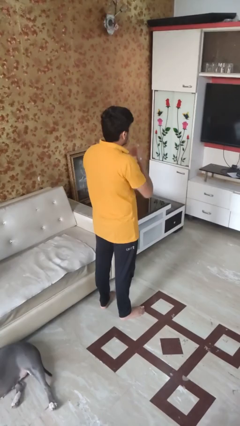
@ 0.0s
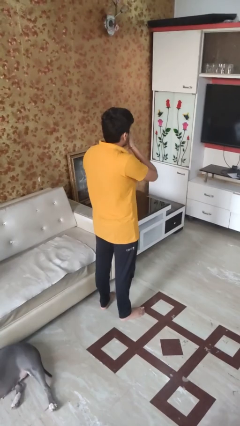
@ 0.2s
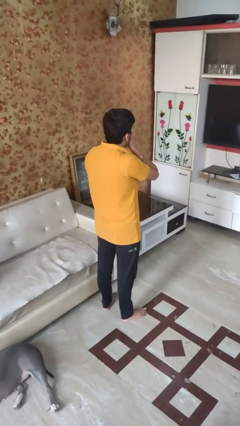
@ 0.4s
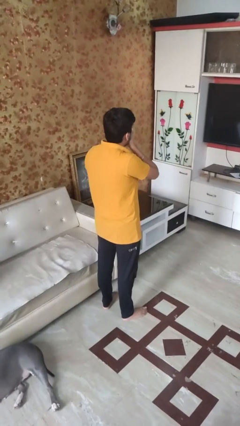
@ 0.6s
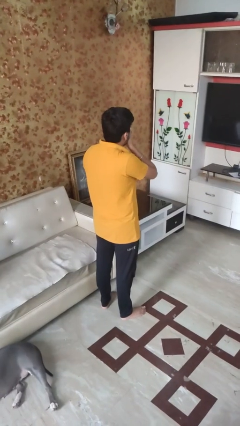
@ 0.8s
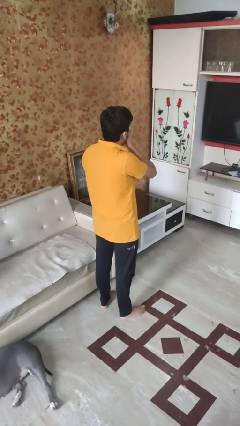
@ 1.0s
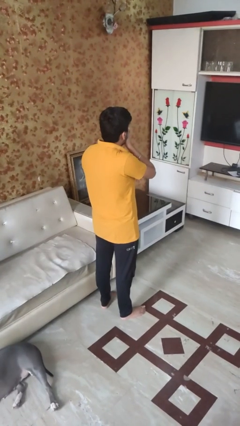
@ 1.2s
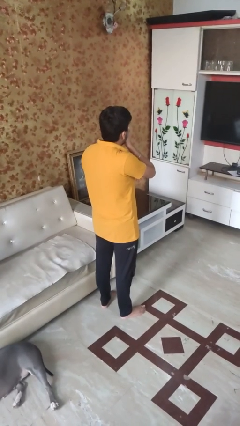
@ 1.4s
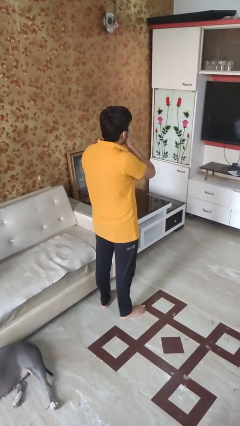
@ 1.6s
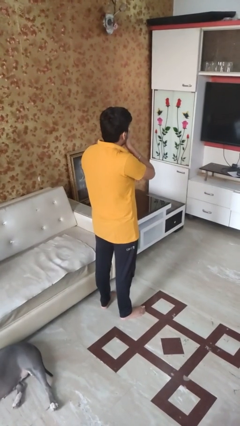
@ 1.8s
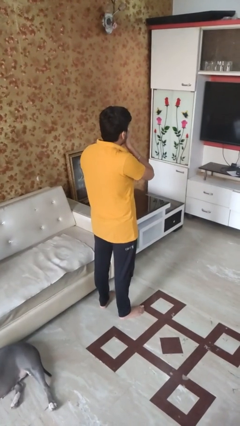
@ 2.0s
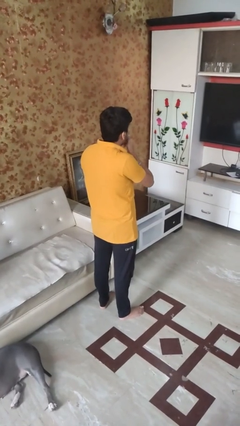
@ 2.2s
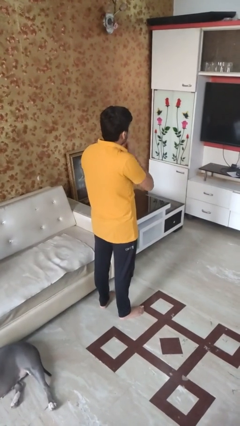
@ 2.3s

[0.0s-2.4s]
person yawns

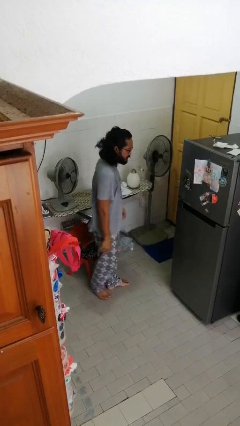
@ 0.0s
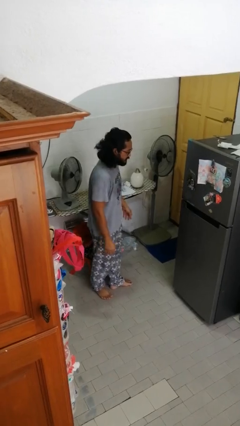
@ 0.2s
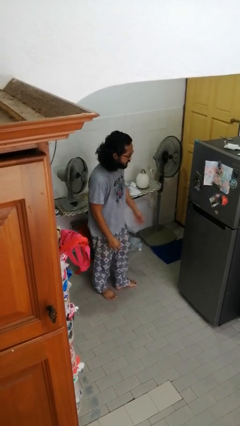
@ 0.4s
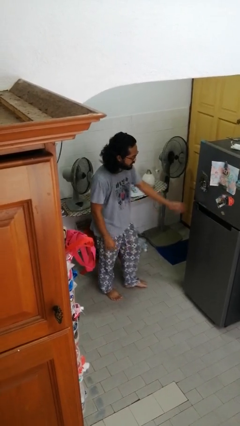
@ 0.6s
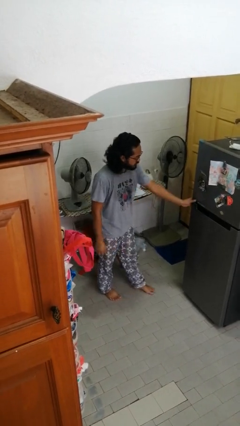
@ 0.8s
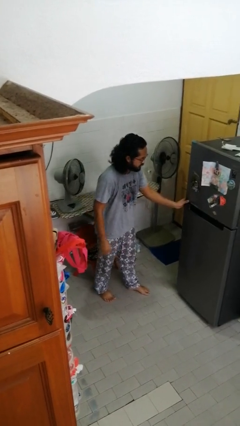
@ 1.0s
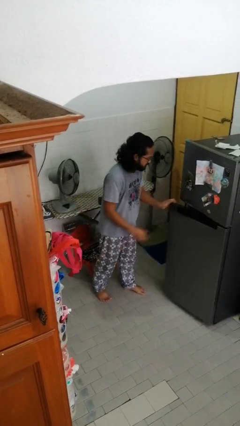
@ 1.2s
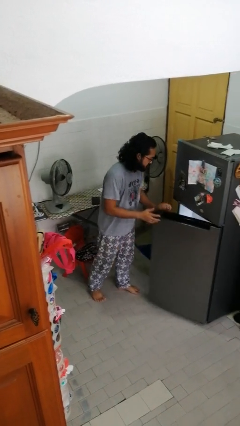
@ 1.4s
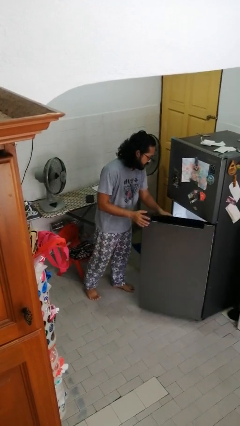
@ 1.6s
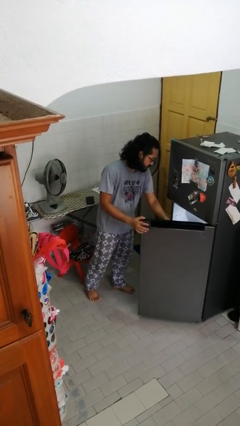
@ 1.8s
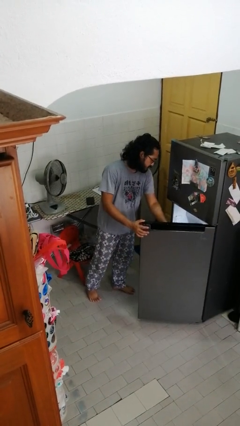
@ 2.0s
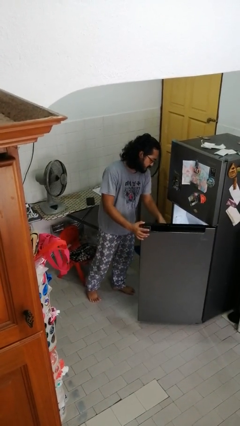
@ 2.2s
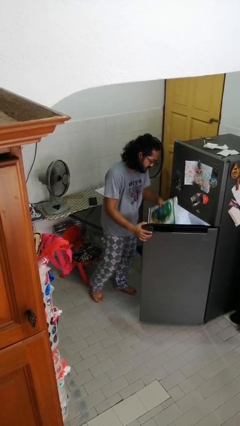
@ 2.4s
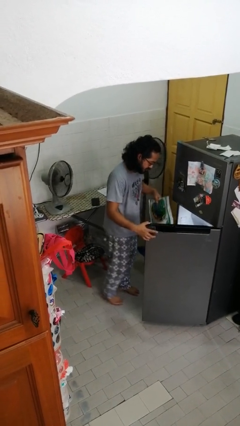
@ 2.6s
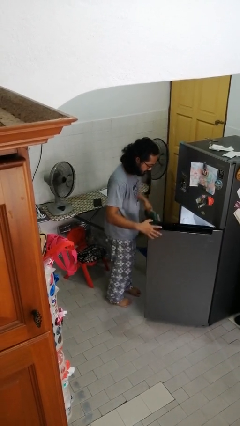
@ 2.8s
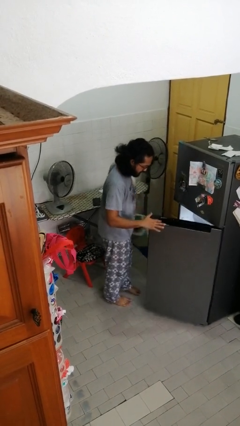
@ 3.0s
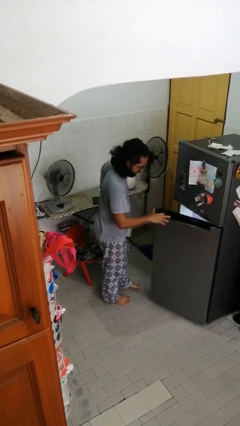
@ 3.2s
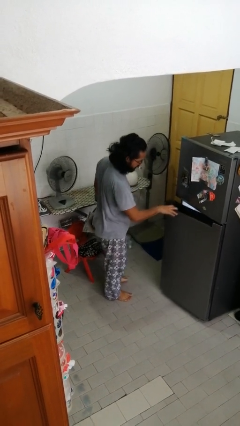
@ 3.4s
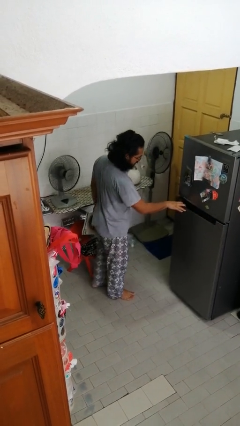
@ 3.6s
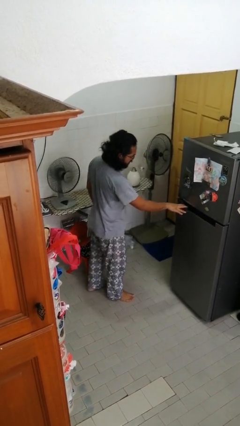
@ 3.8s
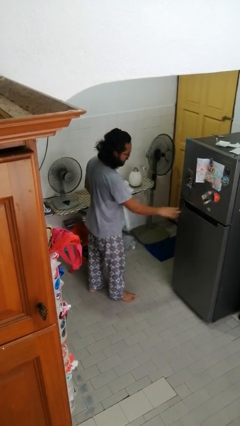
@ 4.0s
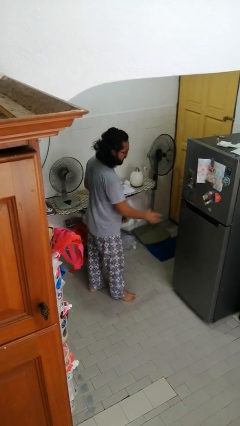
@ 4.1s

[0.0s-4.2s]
person takes object from refrigerator

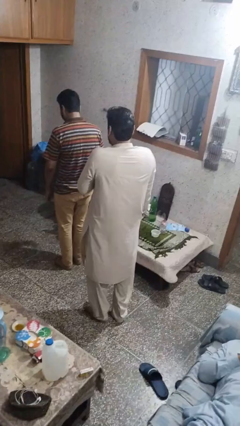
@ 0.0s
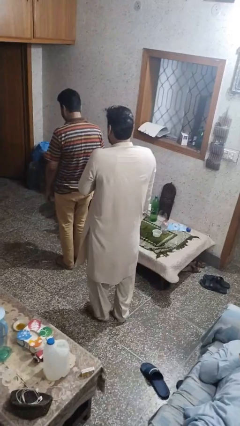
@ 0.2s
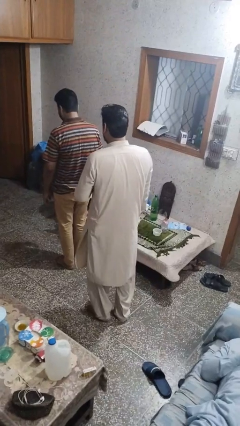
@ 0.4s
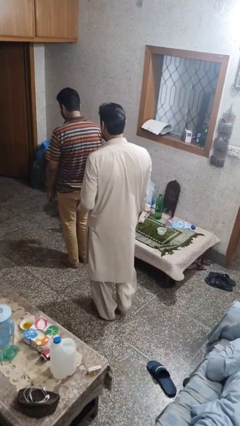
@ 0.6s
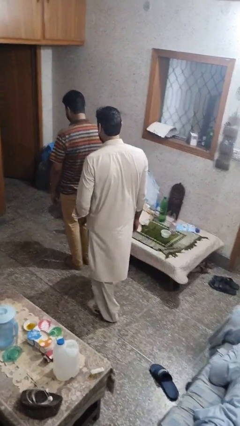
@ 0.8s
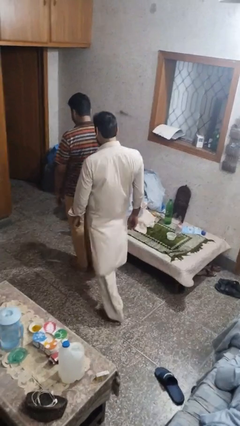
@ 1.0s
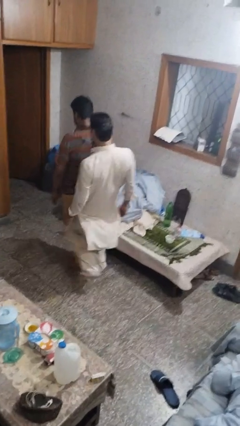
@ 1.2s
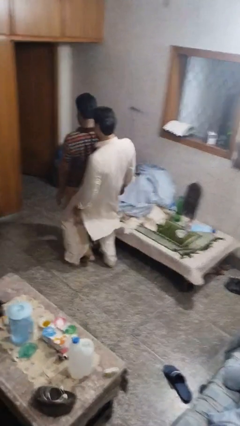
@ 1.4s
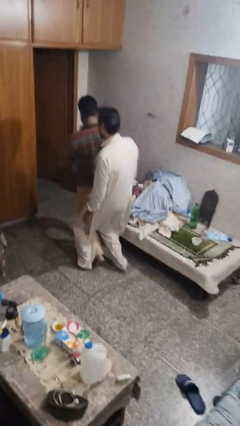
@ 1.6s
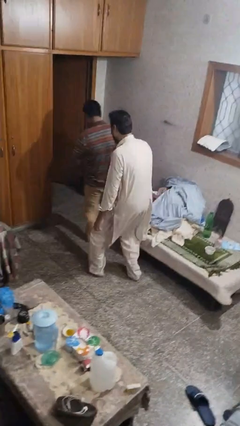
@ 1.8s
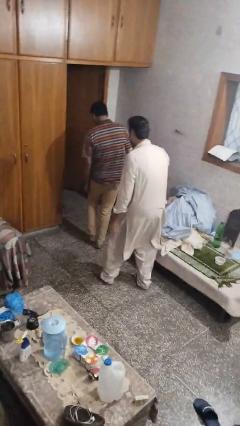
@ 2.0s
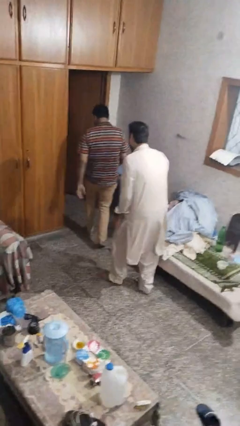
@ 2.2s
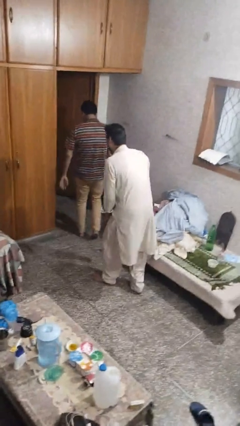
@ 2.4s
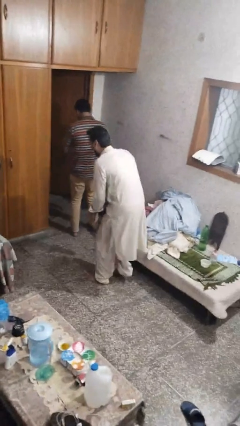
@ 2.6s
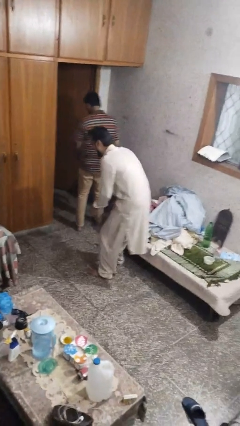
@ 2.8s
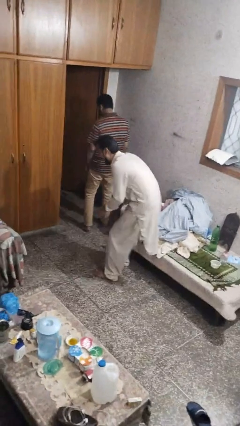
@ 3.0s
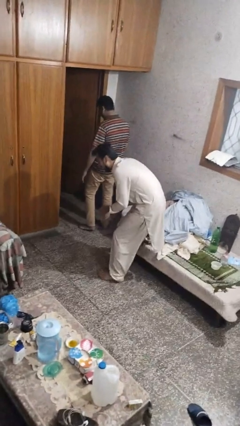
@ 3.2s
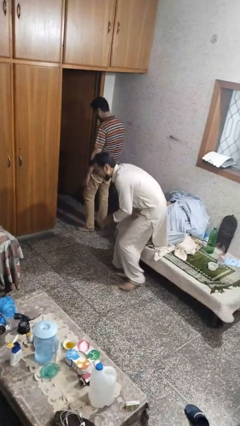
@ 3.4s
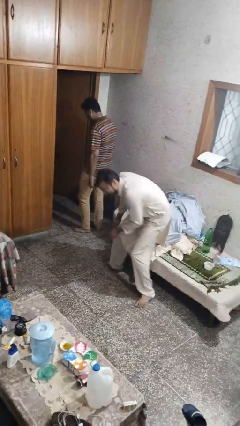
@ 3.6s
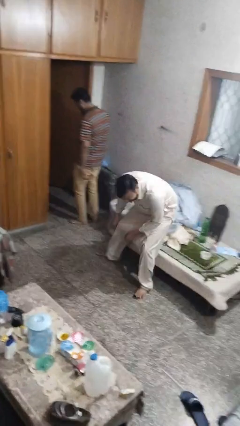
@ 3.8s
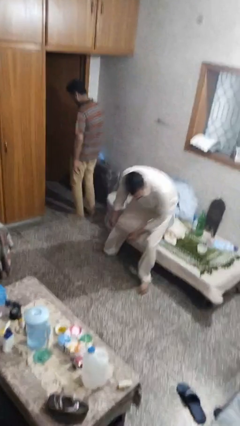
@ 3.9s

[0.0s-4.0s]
person bumps into person

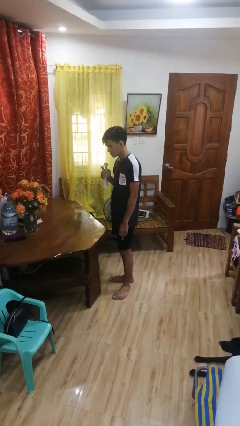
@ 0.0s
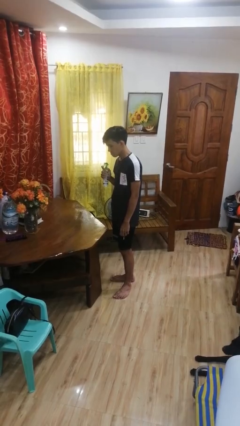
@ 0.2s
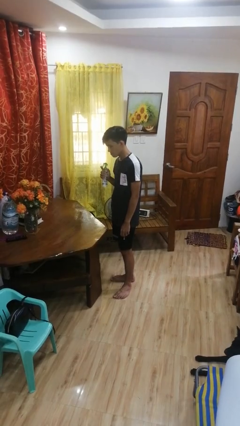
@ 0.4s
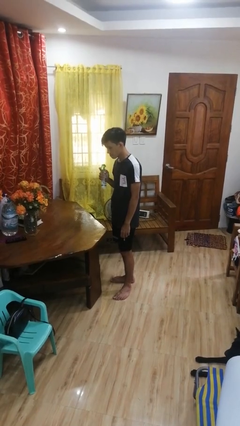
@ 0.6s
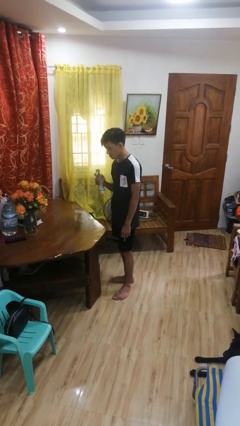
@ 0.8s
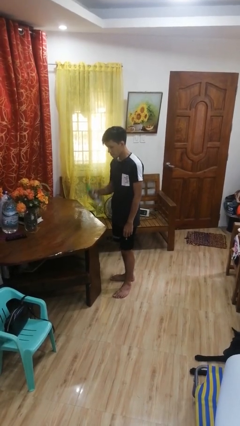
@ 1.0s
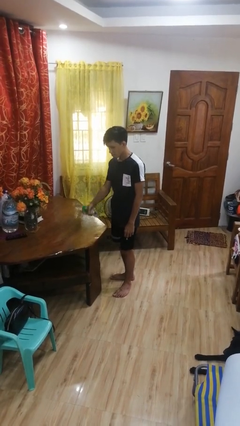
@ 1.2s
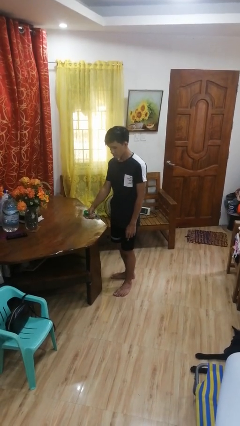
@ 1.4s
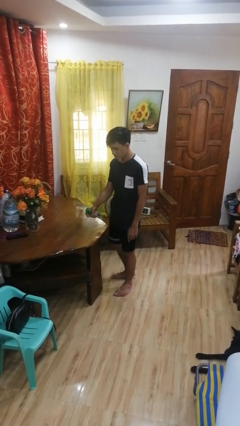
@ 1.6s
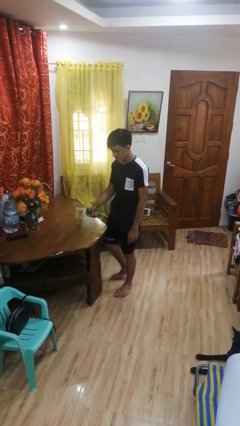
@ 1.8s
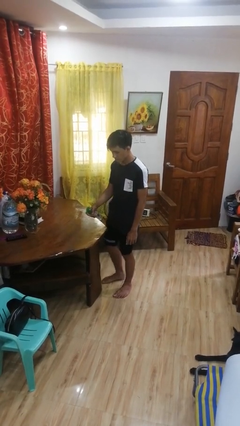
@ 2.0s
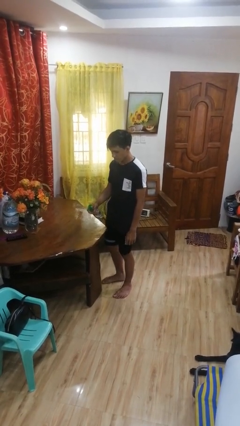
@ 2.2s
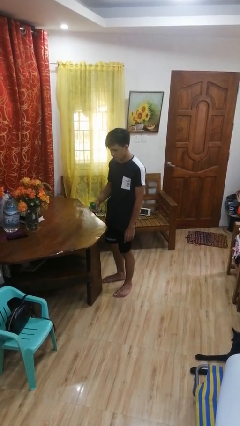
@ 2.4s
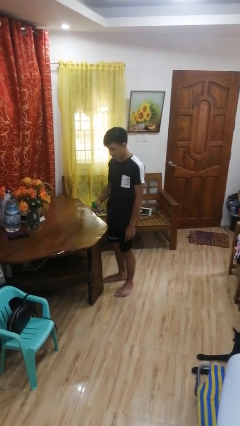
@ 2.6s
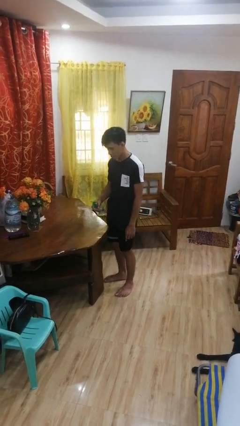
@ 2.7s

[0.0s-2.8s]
person sprays from bottle

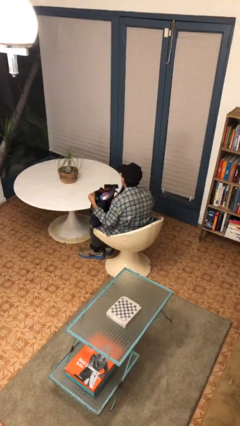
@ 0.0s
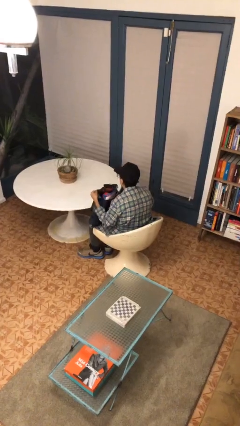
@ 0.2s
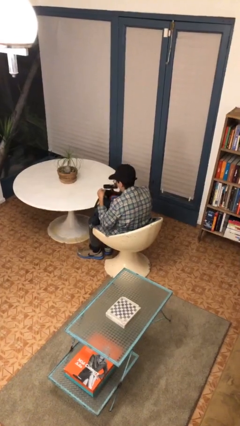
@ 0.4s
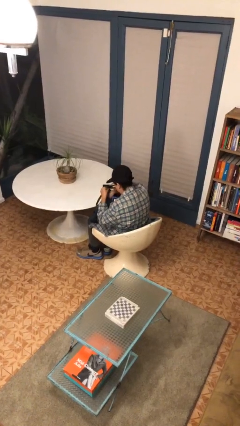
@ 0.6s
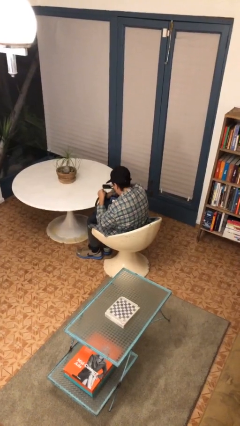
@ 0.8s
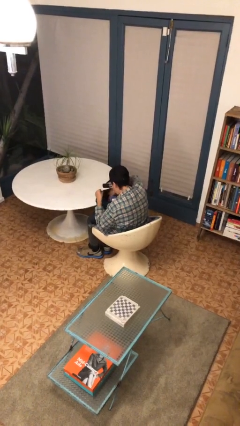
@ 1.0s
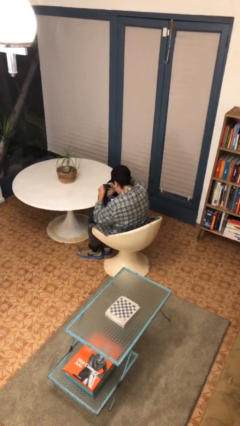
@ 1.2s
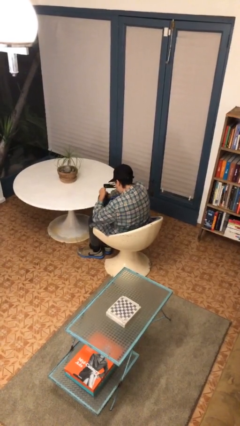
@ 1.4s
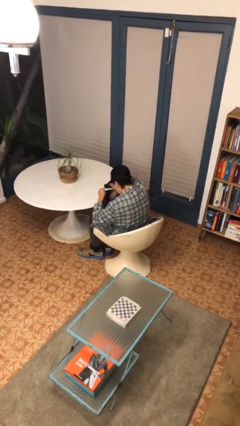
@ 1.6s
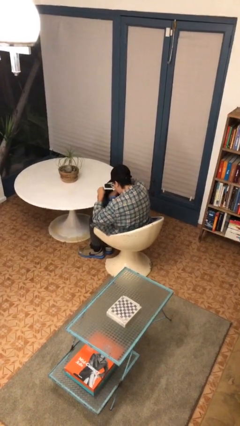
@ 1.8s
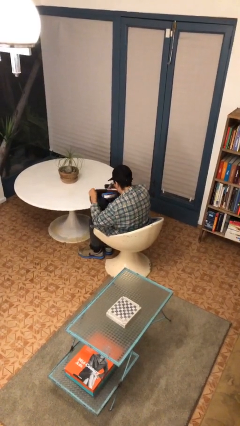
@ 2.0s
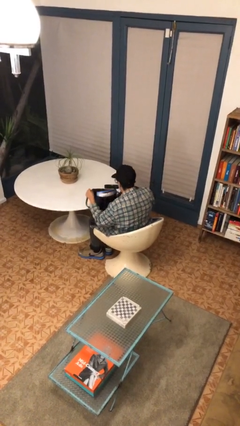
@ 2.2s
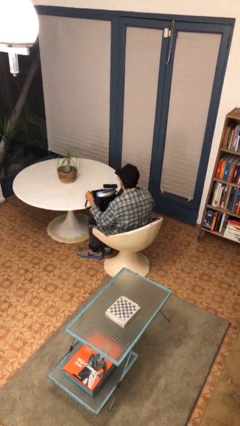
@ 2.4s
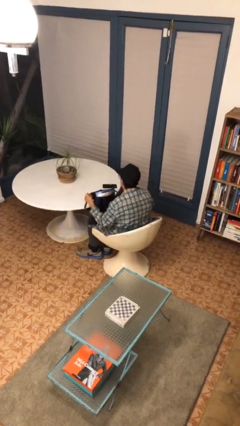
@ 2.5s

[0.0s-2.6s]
person searches in bag

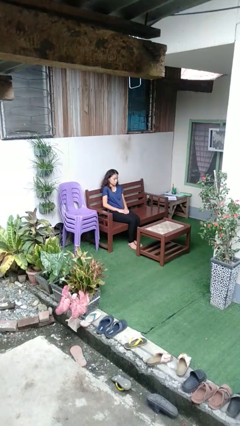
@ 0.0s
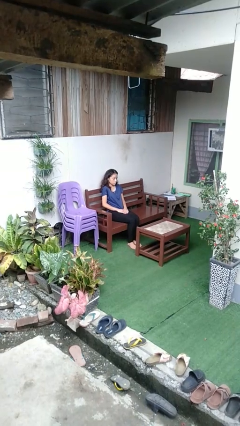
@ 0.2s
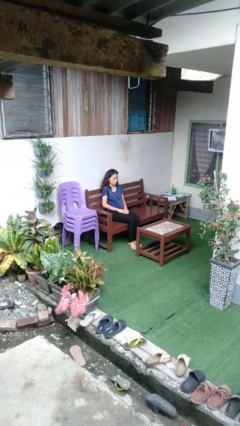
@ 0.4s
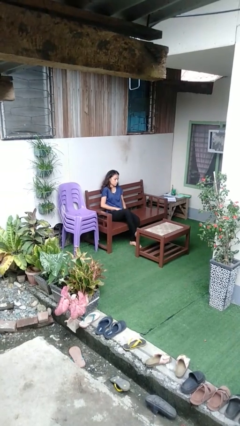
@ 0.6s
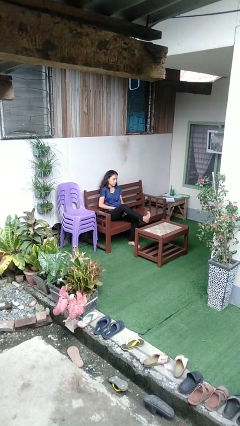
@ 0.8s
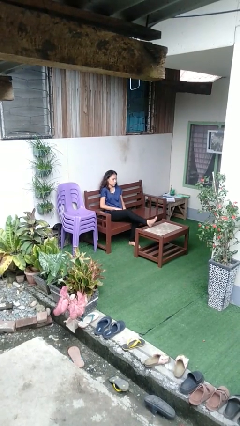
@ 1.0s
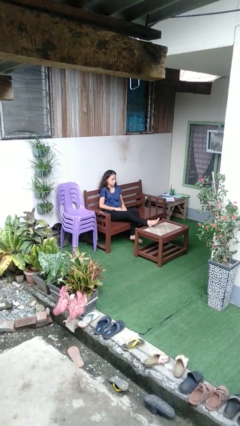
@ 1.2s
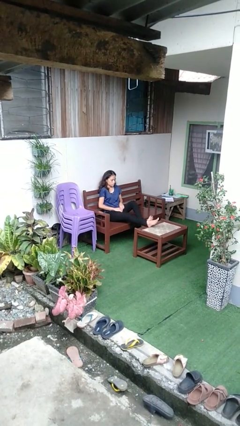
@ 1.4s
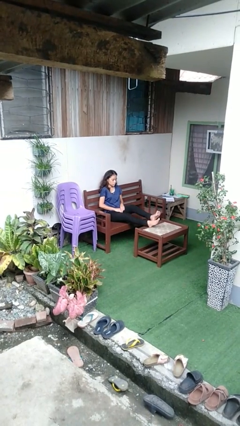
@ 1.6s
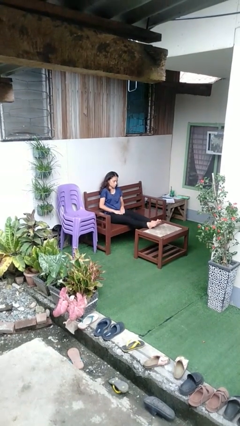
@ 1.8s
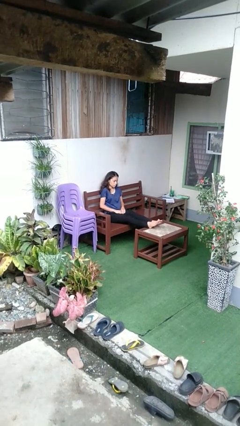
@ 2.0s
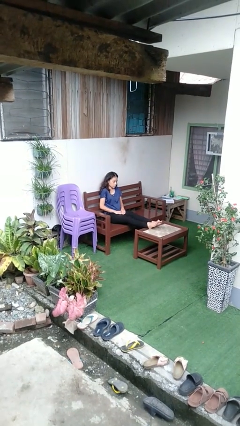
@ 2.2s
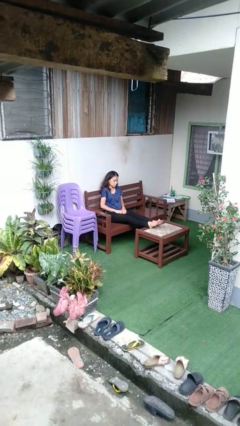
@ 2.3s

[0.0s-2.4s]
person puts feet up
